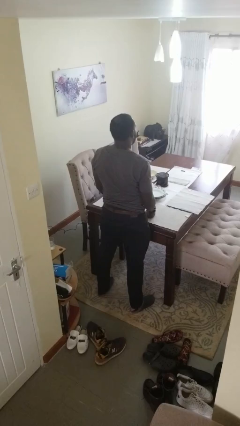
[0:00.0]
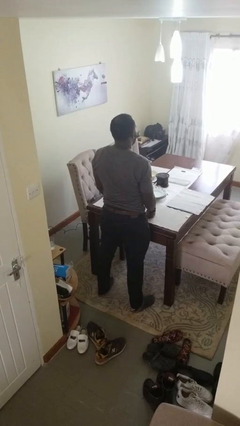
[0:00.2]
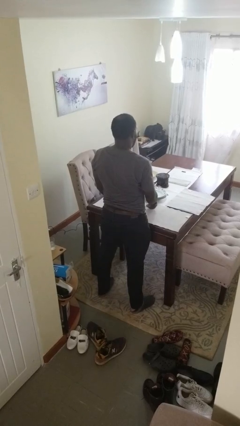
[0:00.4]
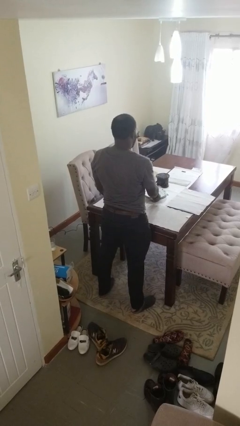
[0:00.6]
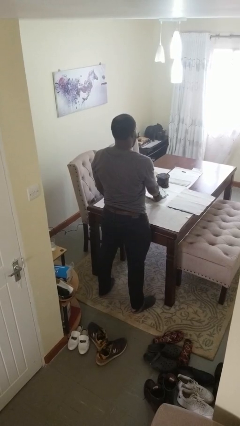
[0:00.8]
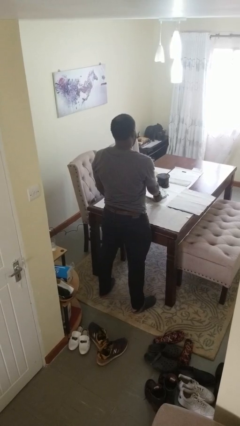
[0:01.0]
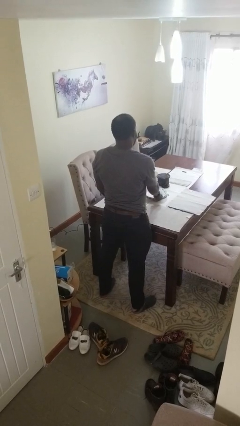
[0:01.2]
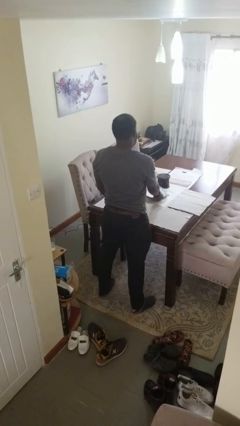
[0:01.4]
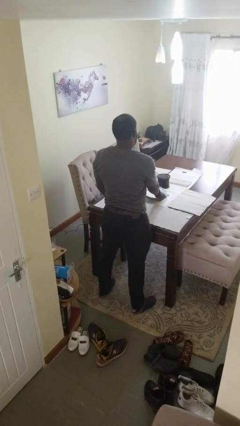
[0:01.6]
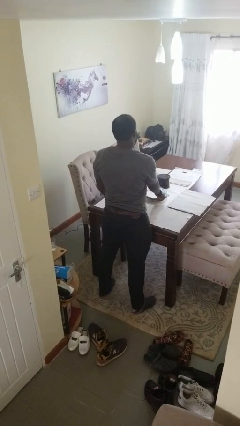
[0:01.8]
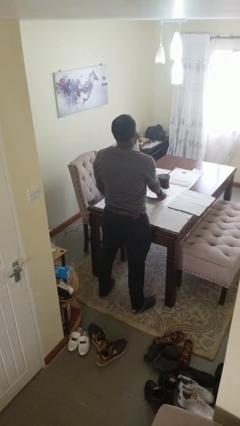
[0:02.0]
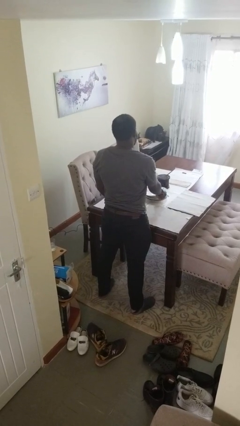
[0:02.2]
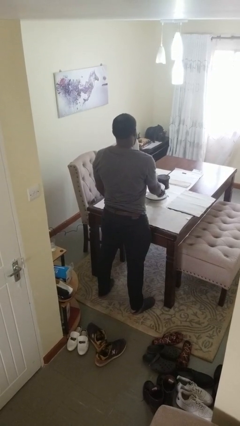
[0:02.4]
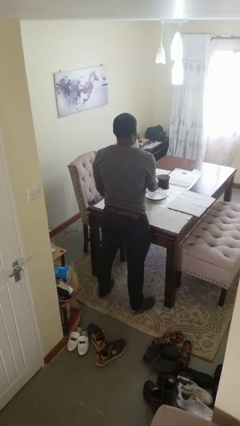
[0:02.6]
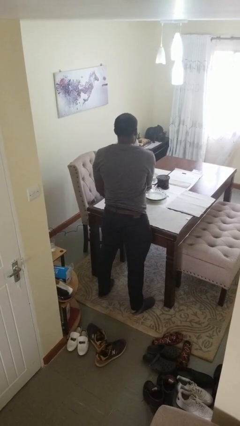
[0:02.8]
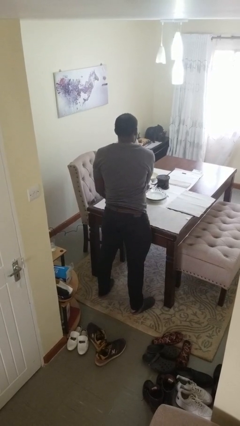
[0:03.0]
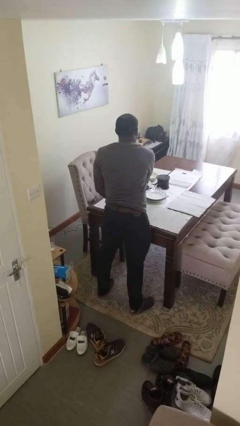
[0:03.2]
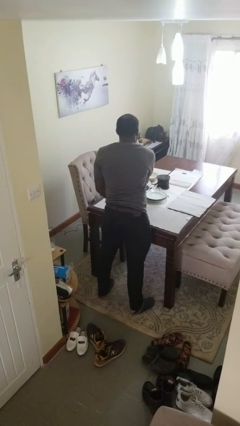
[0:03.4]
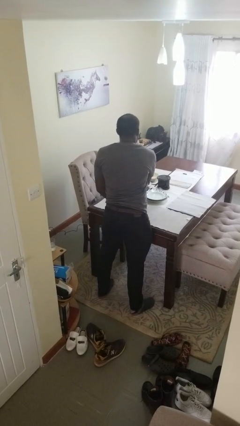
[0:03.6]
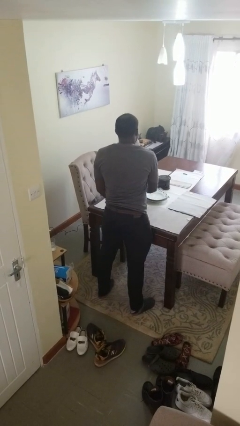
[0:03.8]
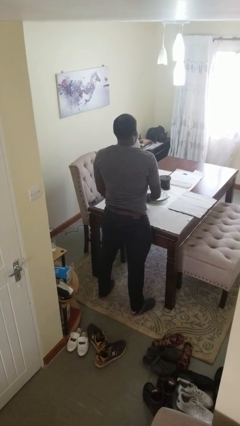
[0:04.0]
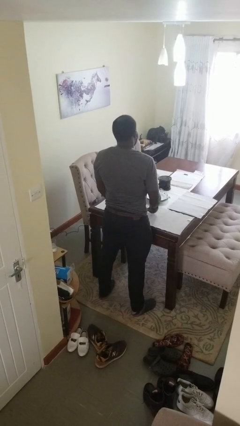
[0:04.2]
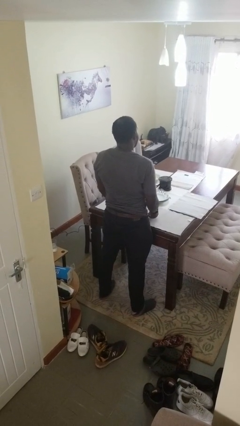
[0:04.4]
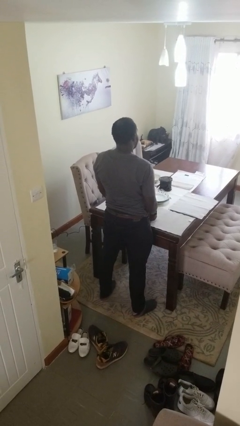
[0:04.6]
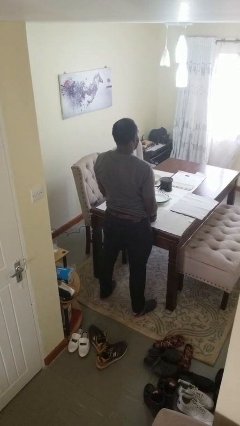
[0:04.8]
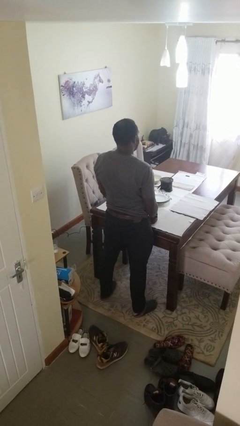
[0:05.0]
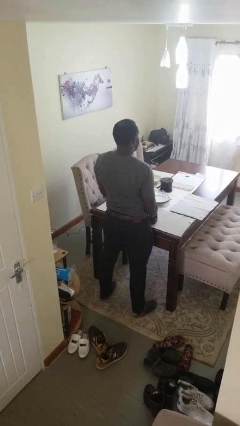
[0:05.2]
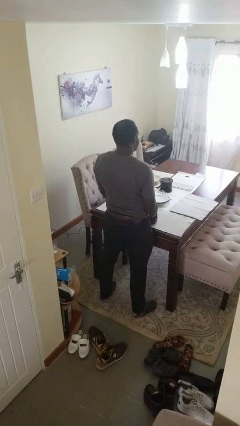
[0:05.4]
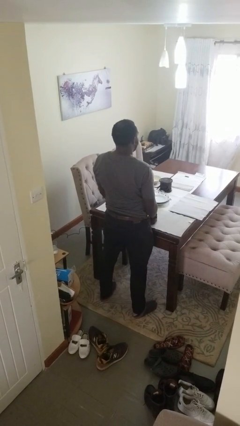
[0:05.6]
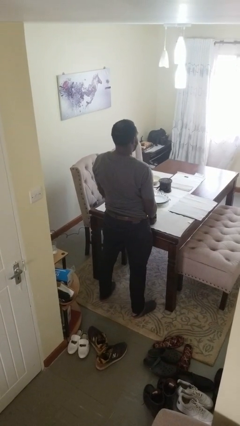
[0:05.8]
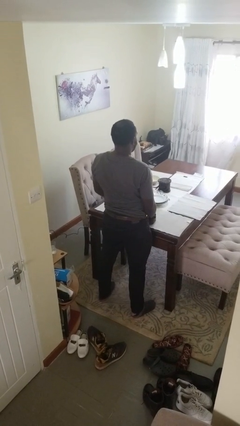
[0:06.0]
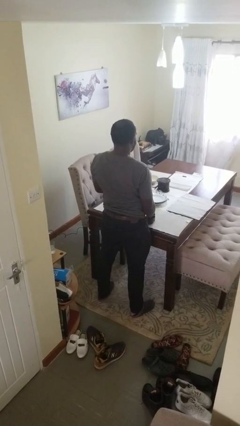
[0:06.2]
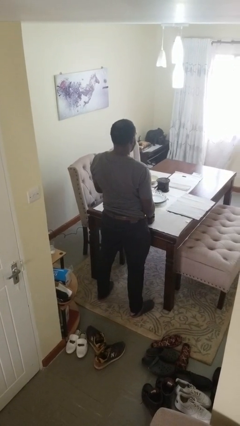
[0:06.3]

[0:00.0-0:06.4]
person sets table

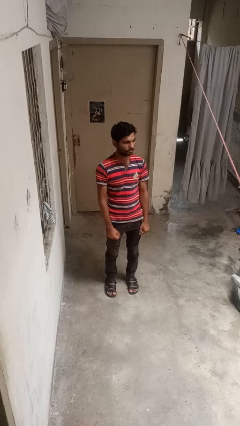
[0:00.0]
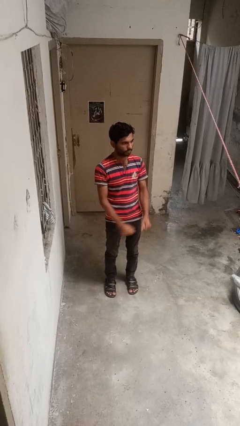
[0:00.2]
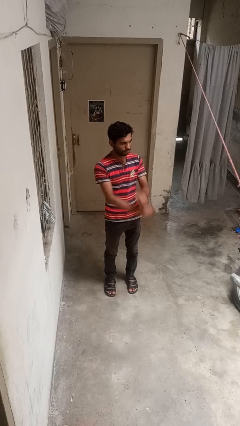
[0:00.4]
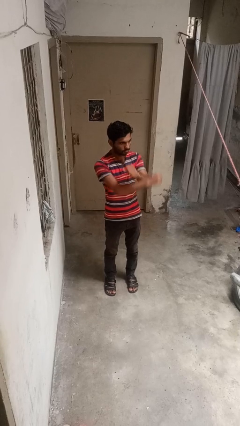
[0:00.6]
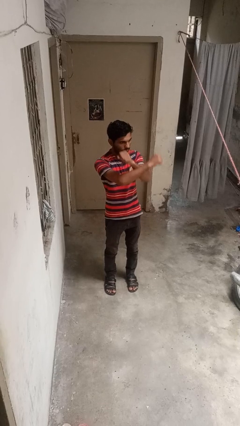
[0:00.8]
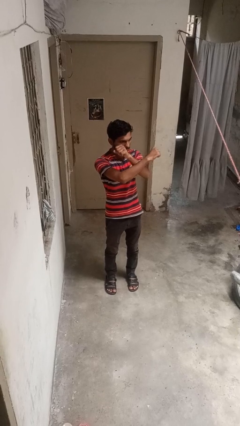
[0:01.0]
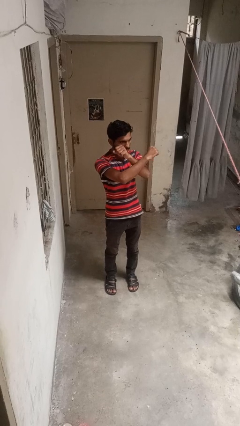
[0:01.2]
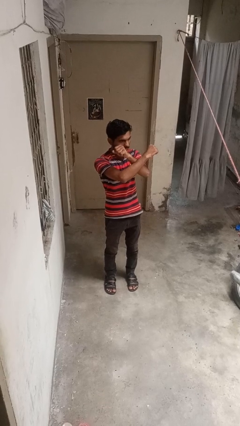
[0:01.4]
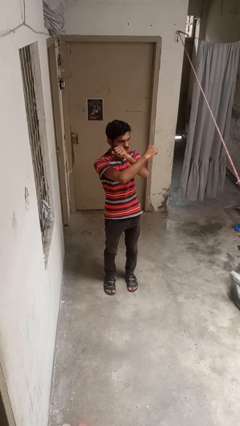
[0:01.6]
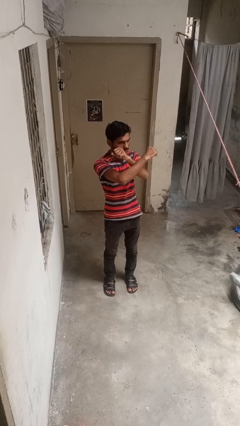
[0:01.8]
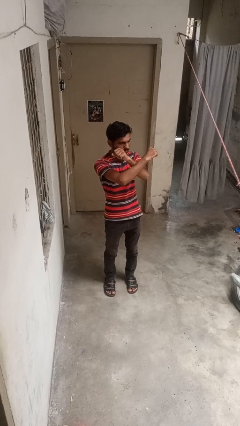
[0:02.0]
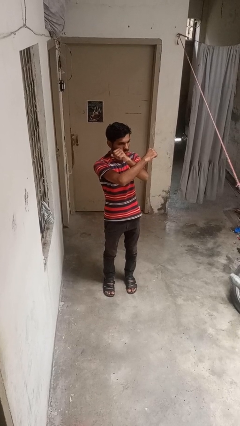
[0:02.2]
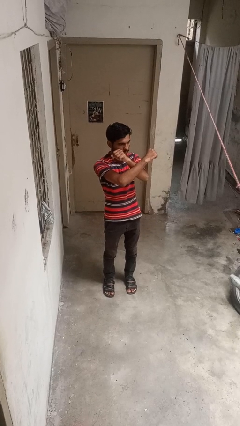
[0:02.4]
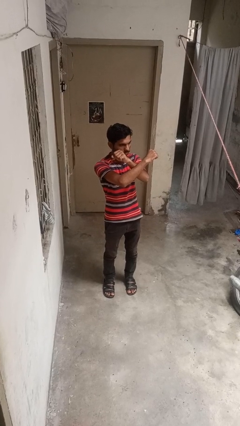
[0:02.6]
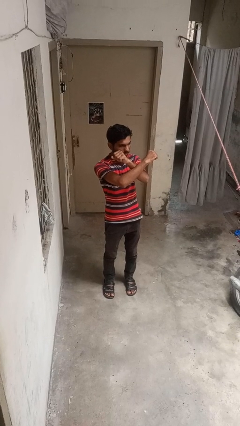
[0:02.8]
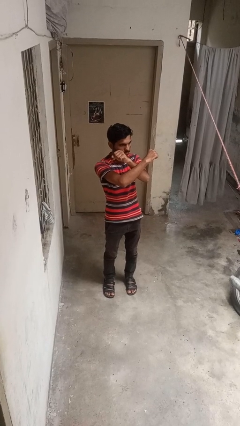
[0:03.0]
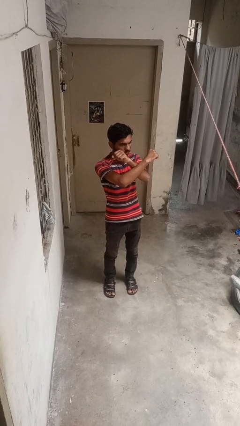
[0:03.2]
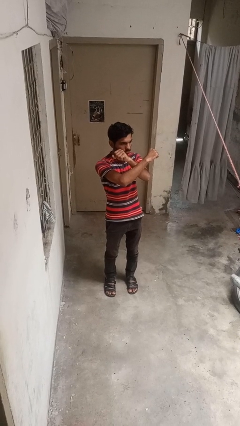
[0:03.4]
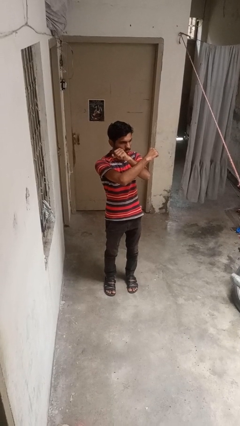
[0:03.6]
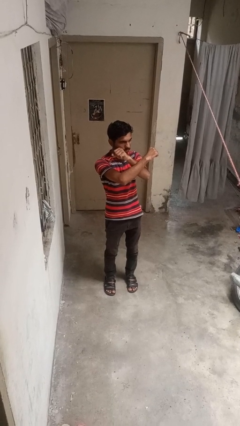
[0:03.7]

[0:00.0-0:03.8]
person gestures arms x

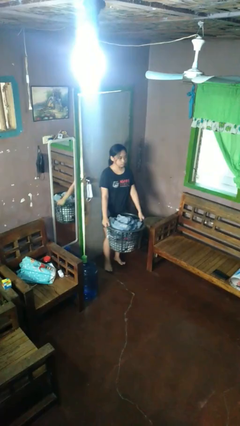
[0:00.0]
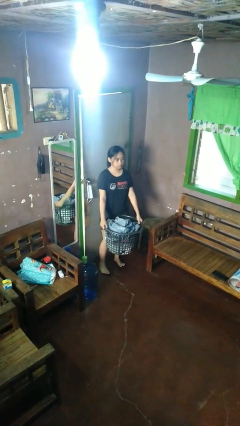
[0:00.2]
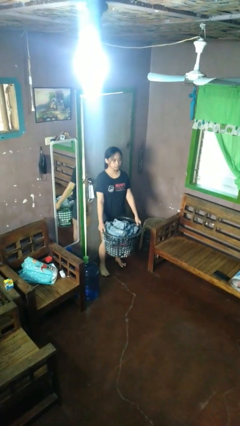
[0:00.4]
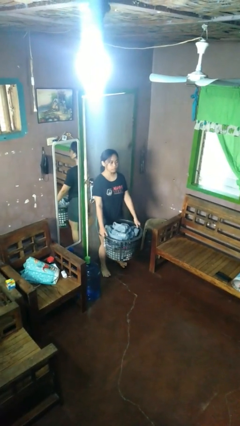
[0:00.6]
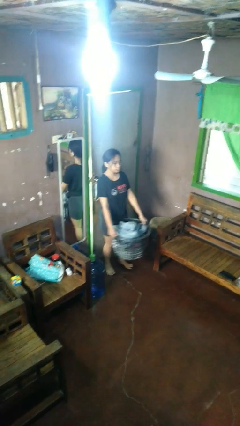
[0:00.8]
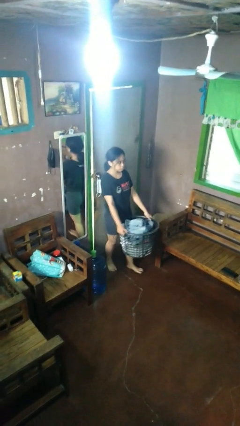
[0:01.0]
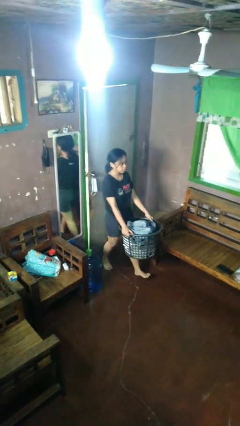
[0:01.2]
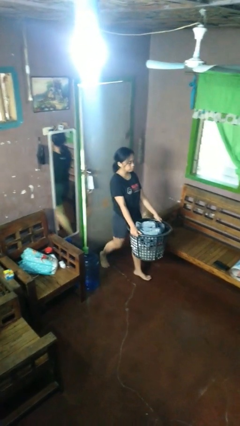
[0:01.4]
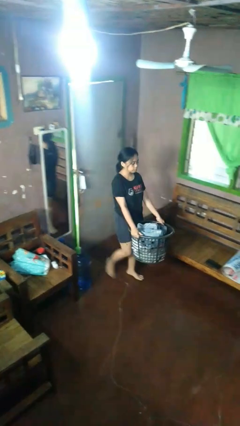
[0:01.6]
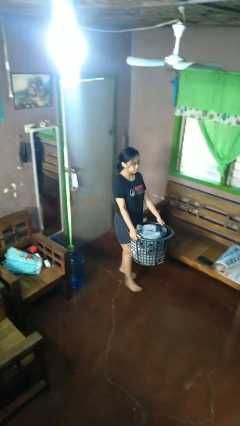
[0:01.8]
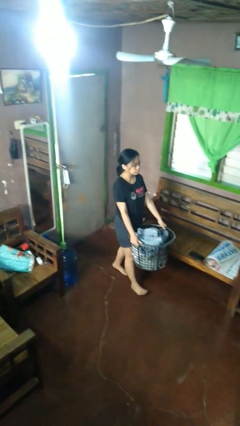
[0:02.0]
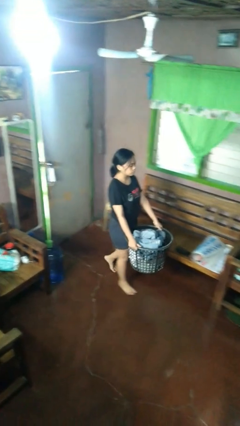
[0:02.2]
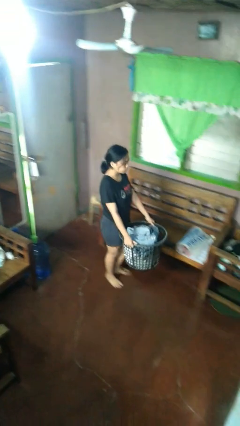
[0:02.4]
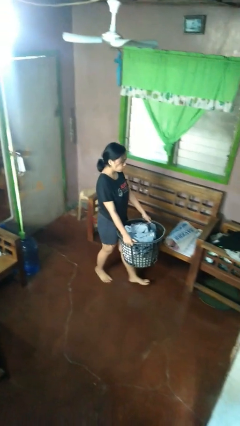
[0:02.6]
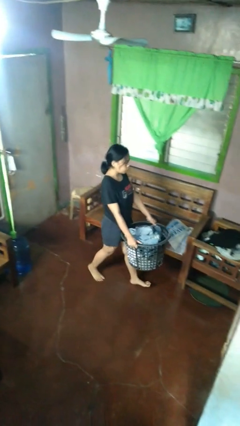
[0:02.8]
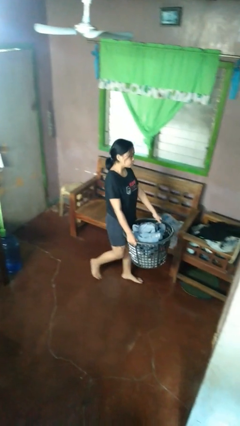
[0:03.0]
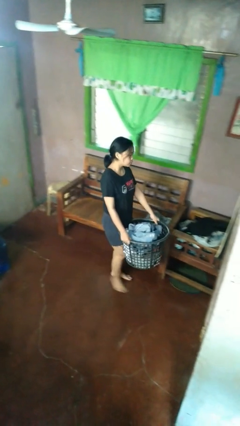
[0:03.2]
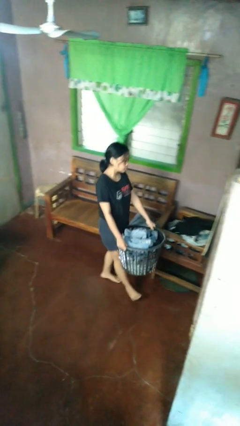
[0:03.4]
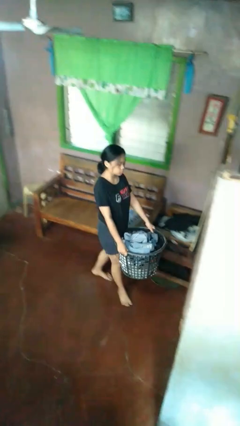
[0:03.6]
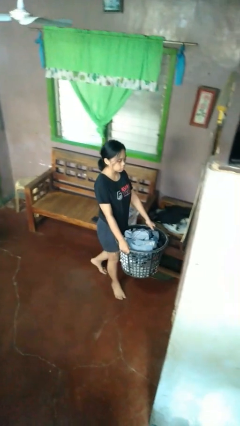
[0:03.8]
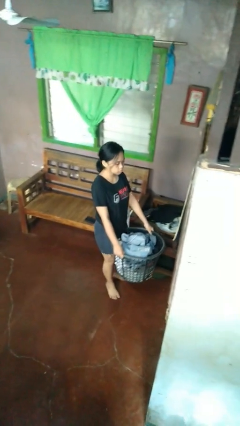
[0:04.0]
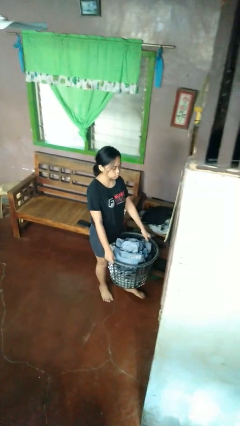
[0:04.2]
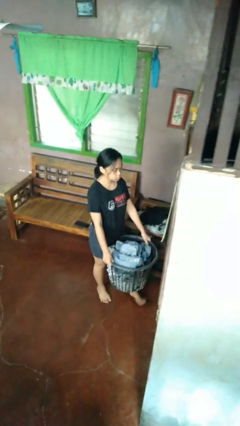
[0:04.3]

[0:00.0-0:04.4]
person carries laundry basket

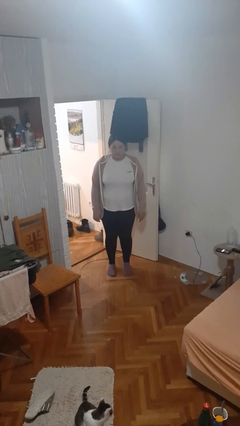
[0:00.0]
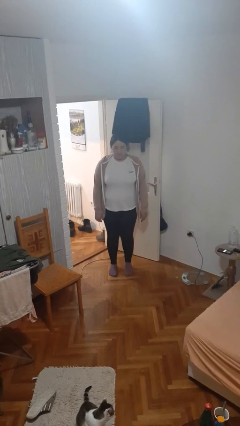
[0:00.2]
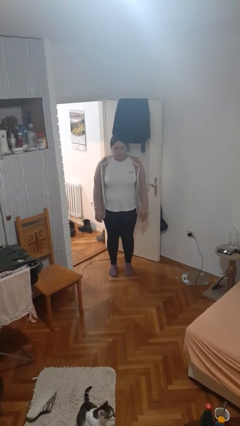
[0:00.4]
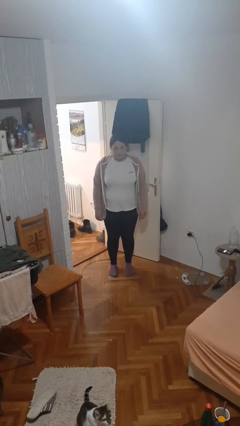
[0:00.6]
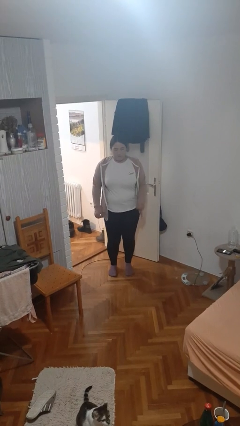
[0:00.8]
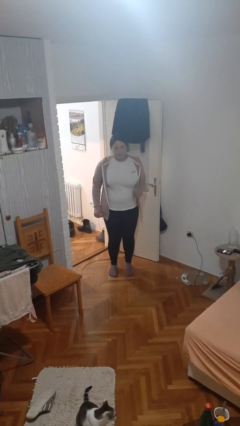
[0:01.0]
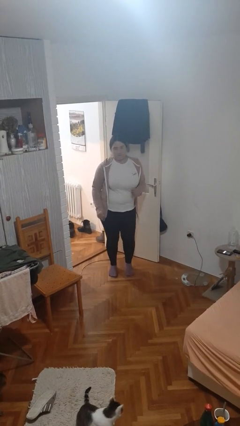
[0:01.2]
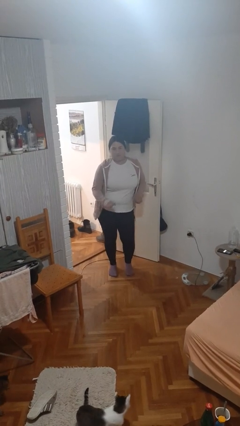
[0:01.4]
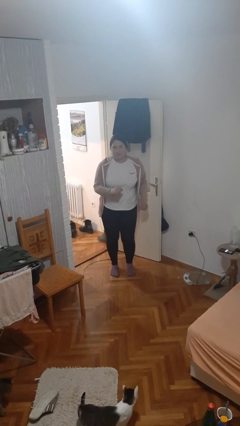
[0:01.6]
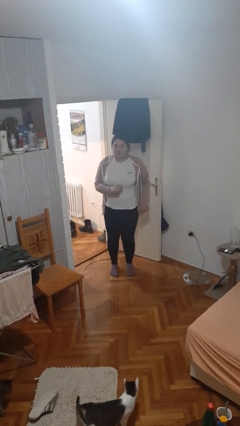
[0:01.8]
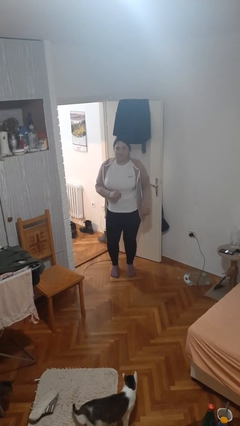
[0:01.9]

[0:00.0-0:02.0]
person dances in place

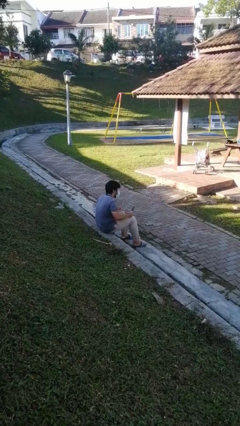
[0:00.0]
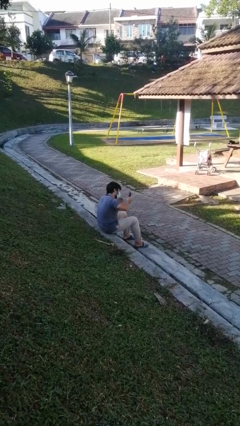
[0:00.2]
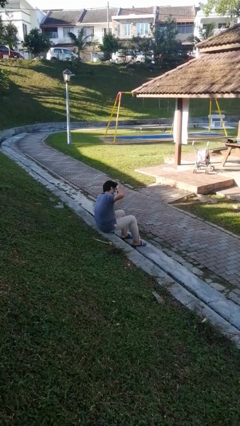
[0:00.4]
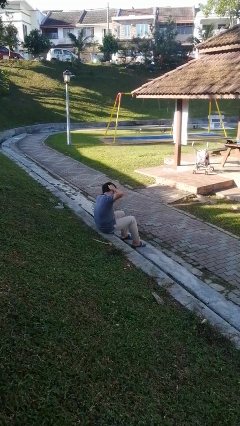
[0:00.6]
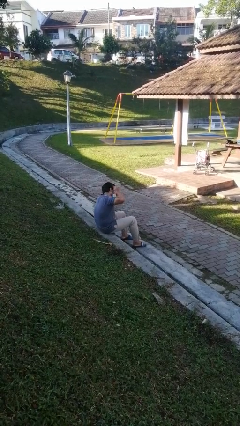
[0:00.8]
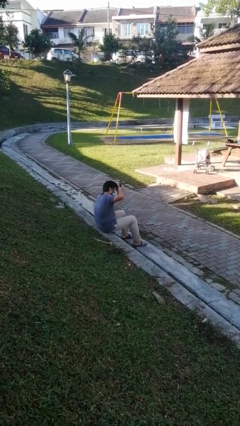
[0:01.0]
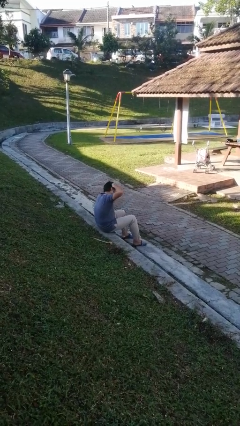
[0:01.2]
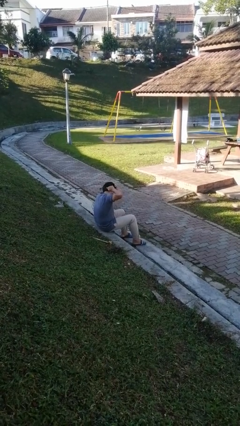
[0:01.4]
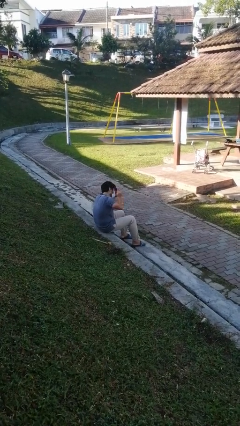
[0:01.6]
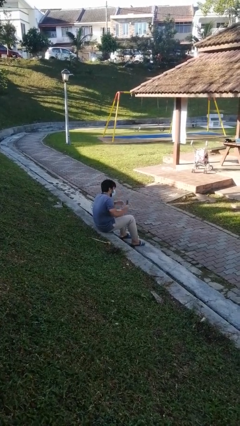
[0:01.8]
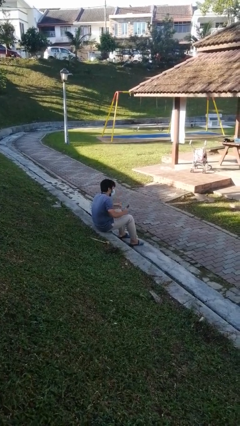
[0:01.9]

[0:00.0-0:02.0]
person brushes hair
